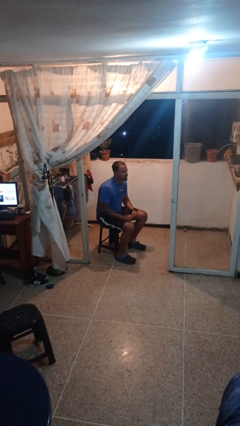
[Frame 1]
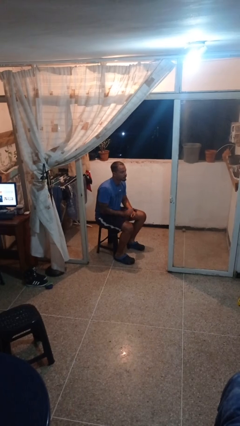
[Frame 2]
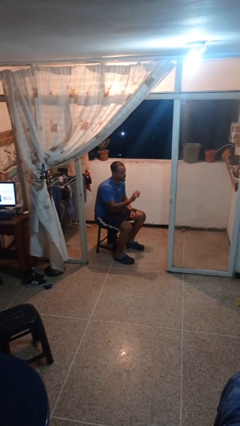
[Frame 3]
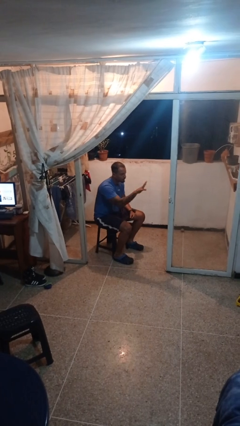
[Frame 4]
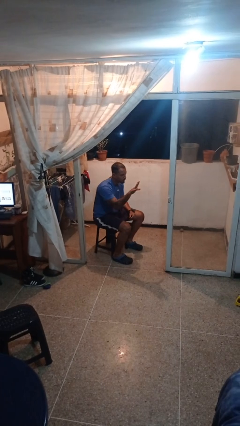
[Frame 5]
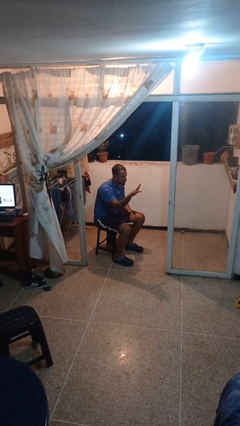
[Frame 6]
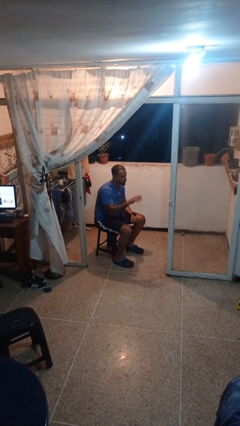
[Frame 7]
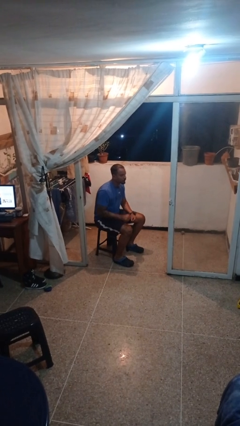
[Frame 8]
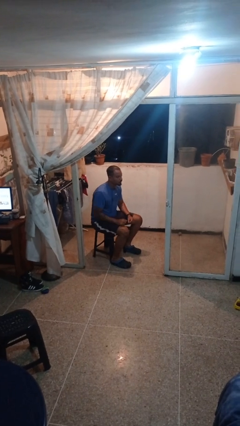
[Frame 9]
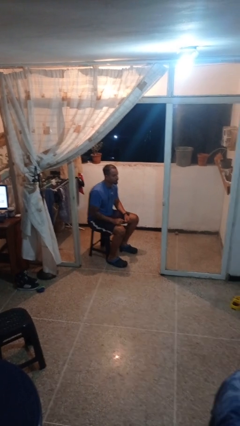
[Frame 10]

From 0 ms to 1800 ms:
person gestures zoom in

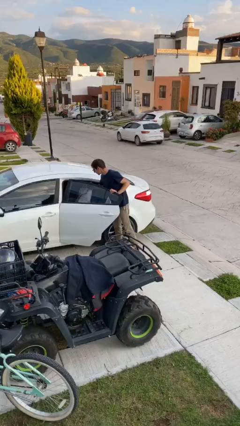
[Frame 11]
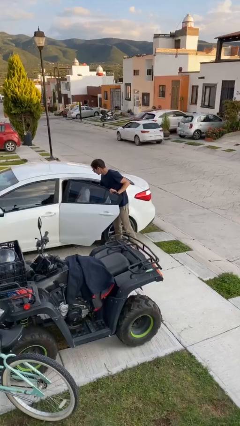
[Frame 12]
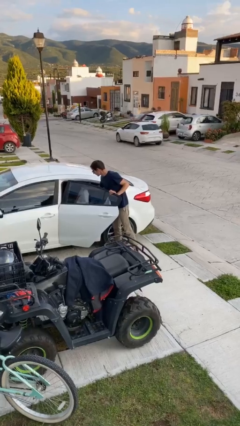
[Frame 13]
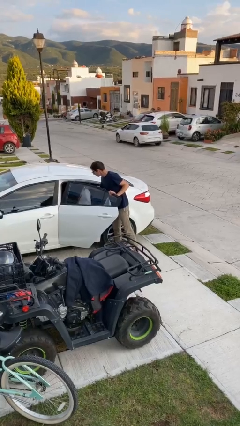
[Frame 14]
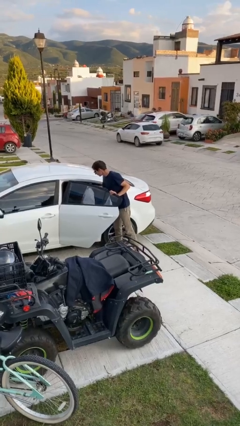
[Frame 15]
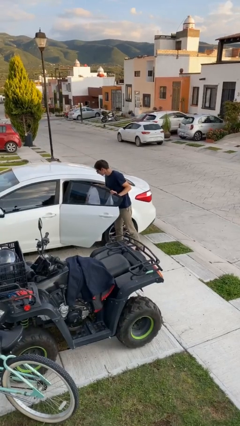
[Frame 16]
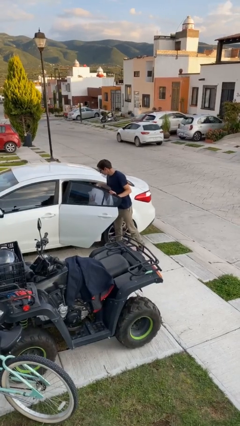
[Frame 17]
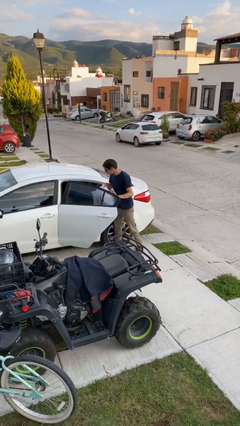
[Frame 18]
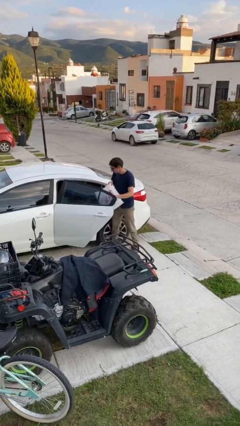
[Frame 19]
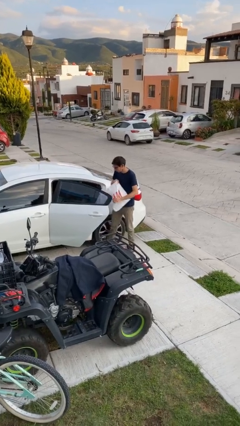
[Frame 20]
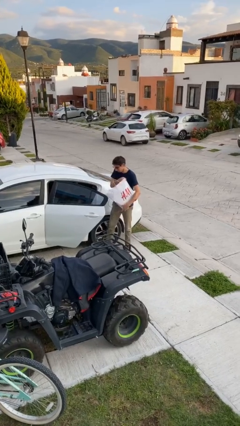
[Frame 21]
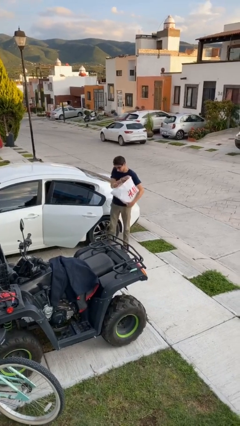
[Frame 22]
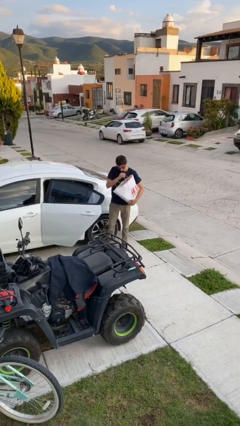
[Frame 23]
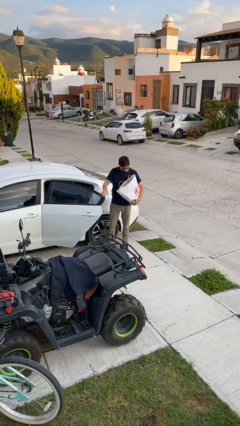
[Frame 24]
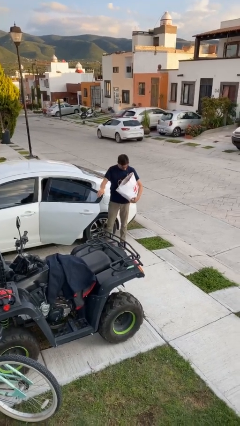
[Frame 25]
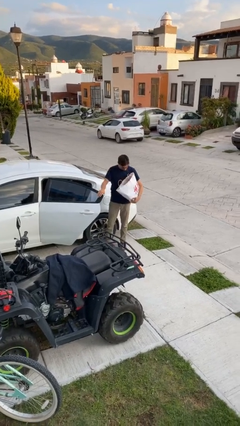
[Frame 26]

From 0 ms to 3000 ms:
person unloads car

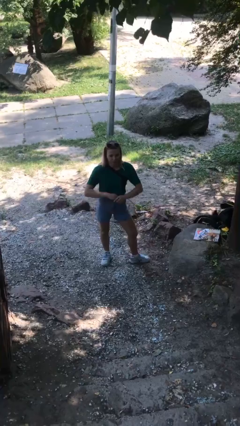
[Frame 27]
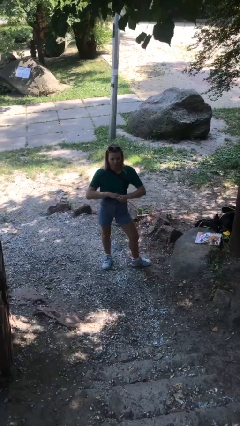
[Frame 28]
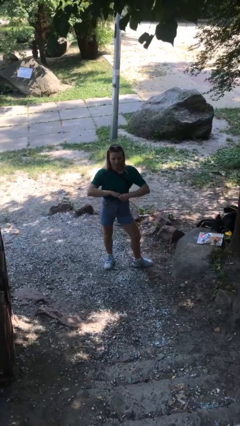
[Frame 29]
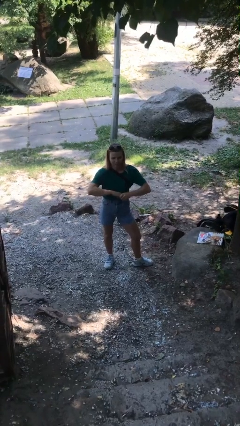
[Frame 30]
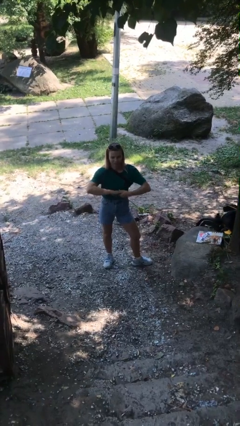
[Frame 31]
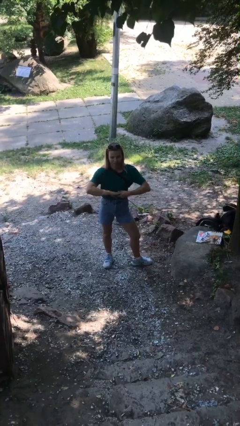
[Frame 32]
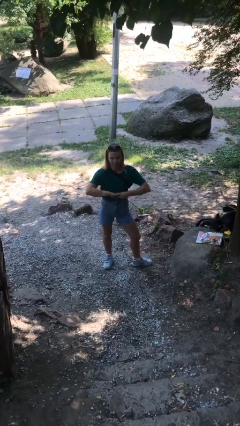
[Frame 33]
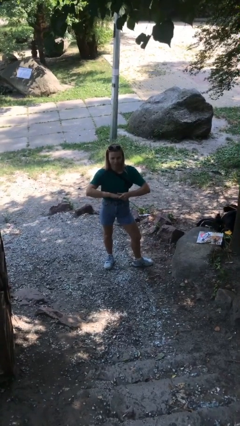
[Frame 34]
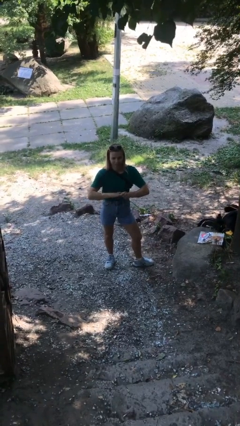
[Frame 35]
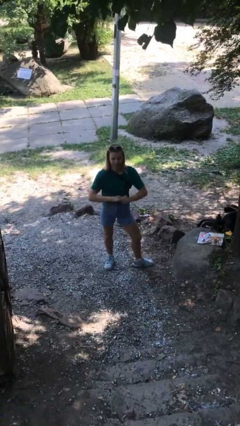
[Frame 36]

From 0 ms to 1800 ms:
person cracks knuckles

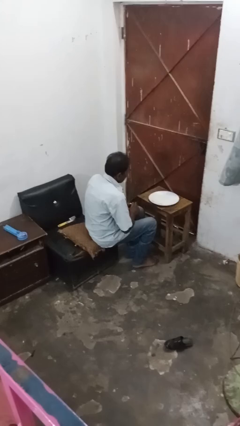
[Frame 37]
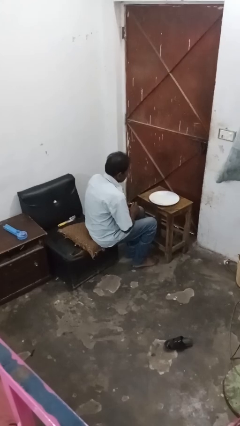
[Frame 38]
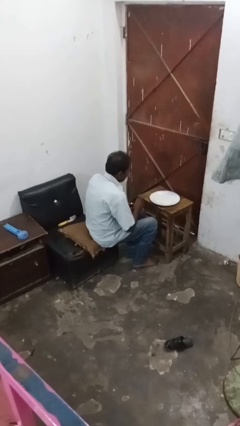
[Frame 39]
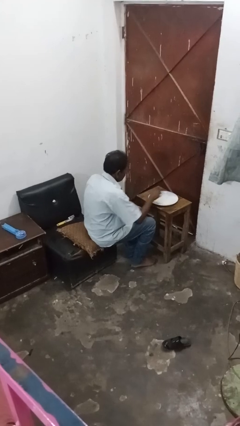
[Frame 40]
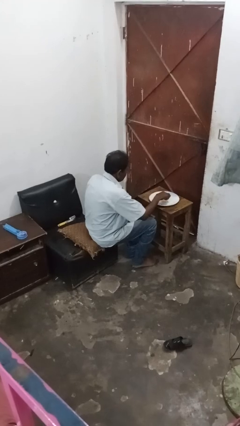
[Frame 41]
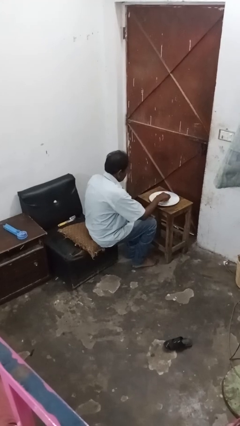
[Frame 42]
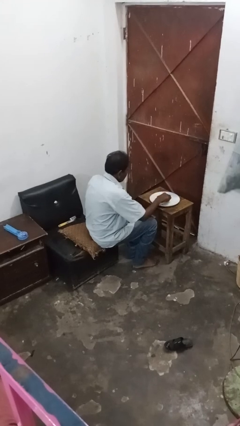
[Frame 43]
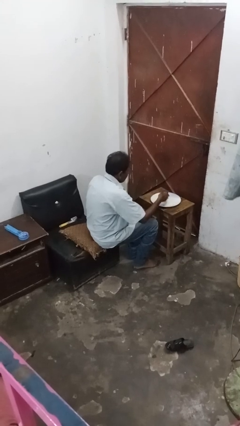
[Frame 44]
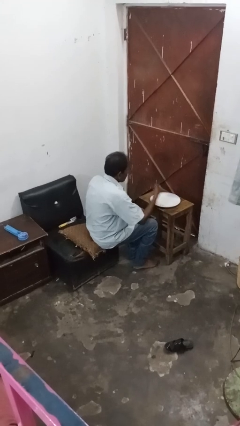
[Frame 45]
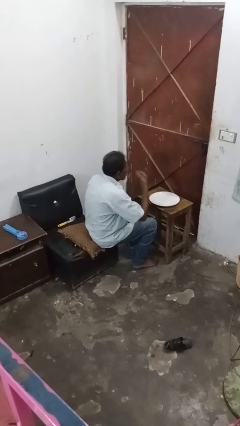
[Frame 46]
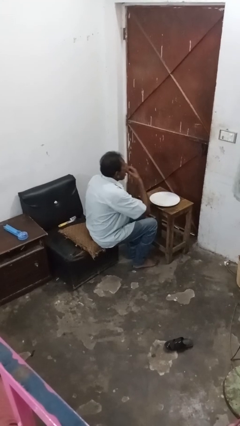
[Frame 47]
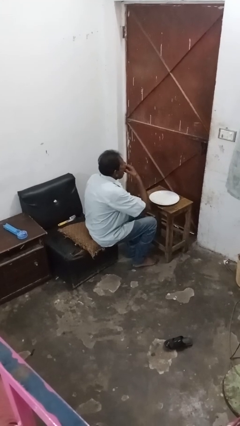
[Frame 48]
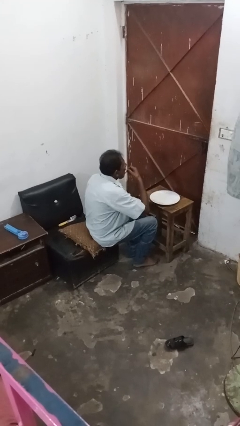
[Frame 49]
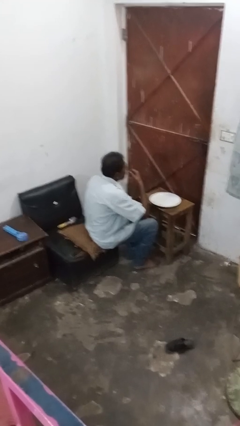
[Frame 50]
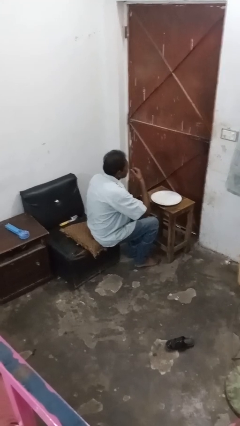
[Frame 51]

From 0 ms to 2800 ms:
person eats with hands

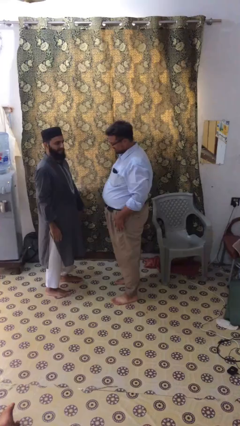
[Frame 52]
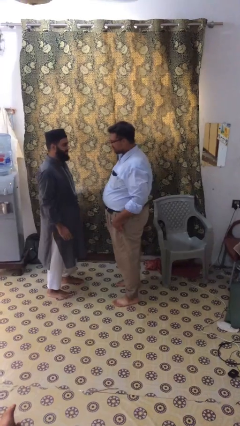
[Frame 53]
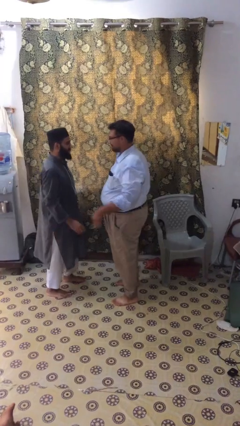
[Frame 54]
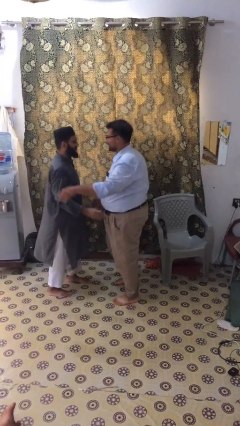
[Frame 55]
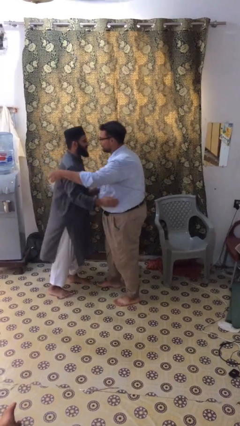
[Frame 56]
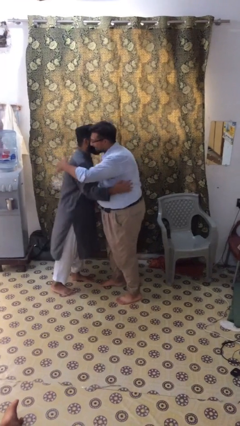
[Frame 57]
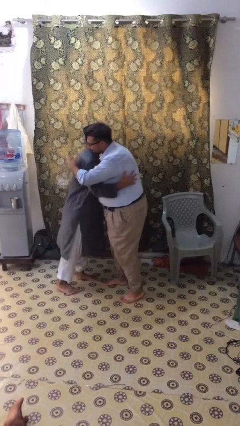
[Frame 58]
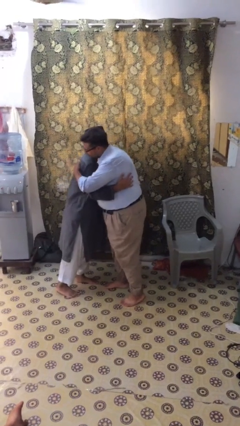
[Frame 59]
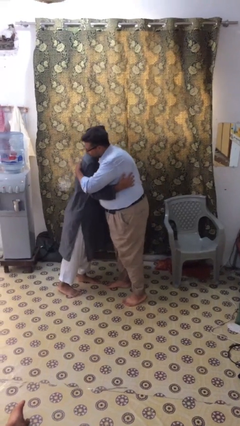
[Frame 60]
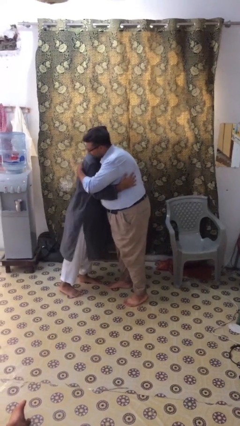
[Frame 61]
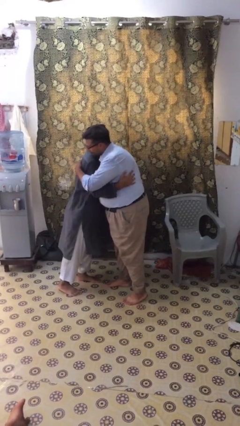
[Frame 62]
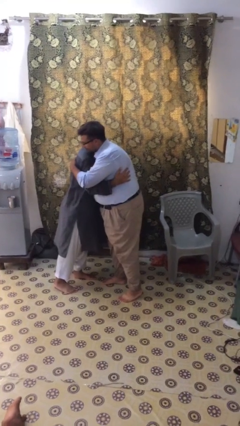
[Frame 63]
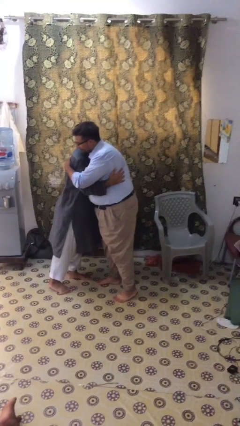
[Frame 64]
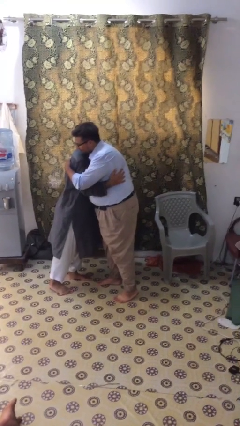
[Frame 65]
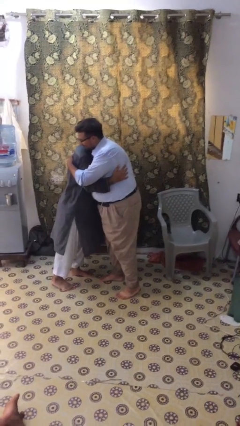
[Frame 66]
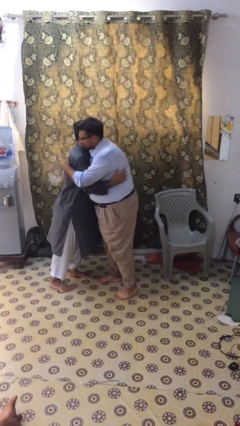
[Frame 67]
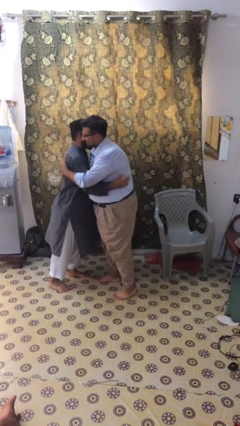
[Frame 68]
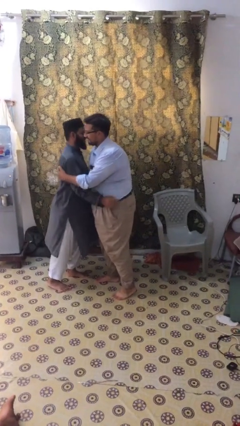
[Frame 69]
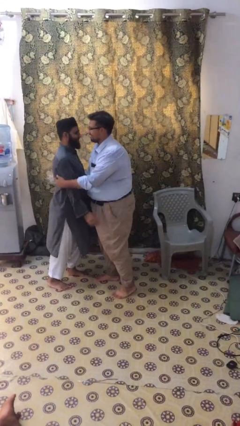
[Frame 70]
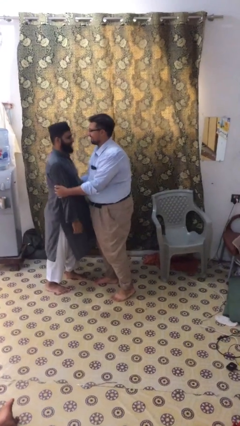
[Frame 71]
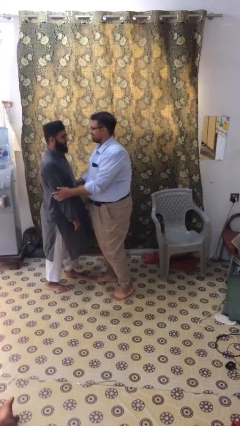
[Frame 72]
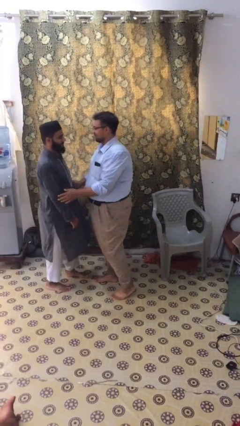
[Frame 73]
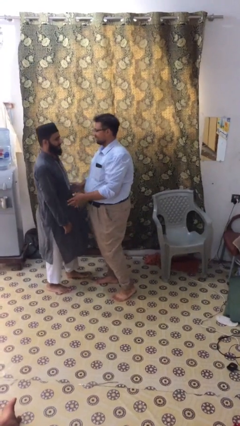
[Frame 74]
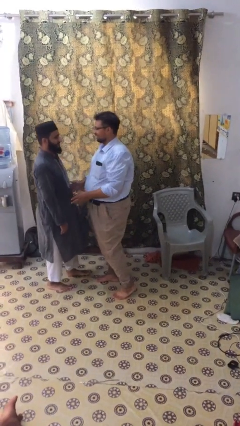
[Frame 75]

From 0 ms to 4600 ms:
person embraces person

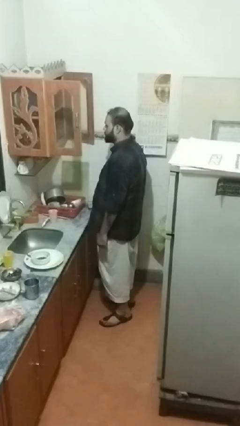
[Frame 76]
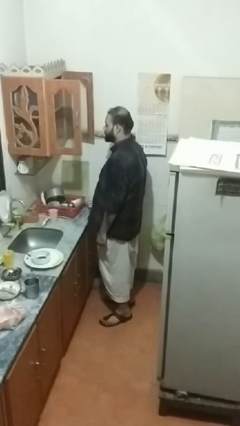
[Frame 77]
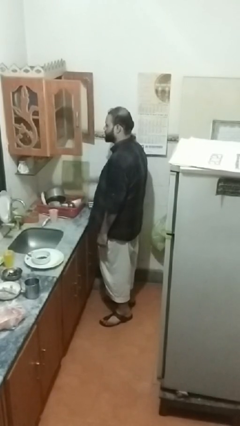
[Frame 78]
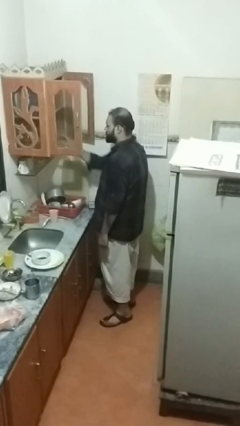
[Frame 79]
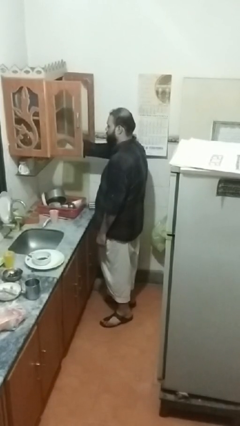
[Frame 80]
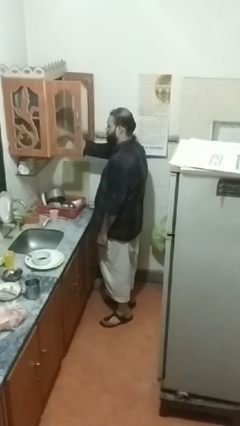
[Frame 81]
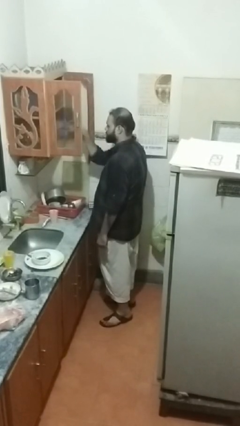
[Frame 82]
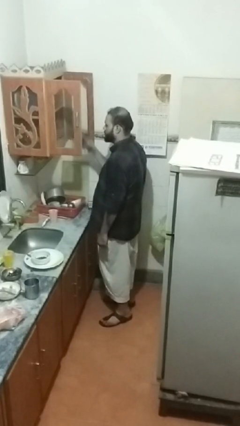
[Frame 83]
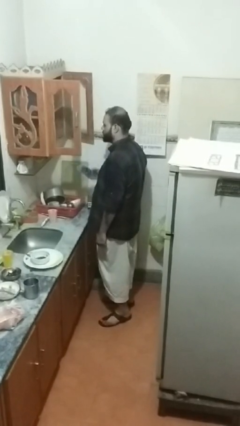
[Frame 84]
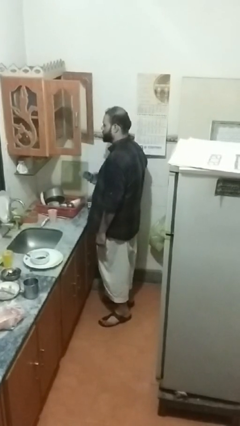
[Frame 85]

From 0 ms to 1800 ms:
person takes object from cabinet

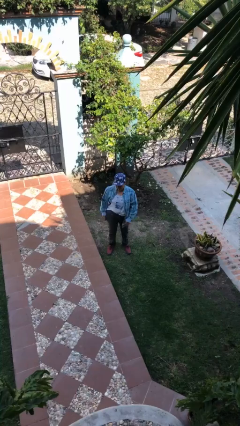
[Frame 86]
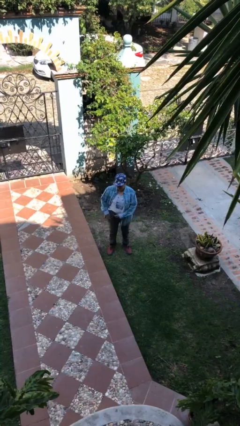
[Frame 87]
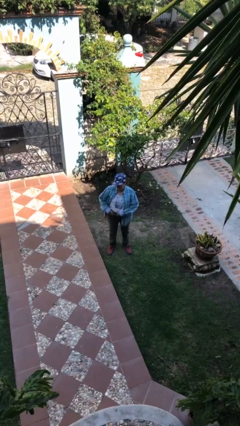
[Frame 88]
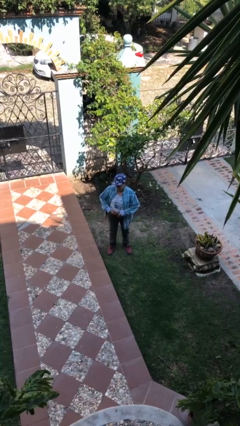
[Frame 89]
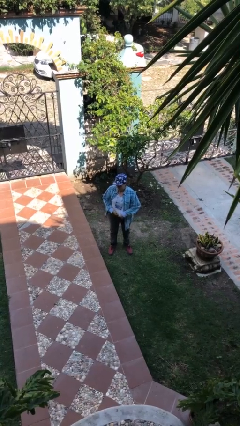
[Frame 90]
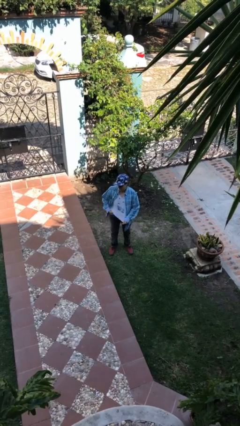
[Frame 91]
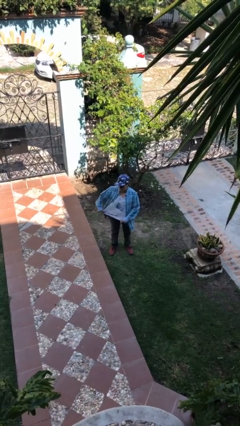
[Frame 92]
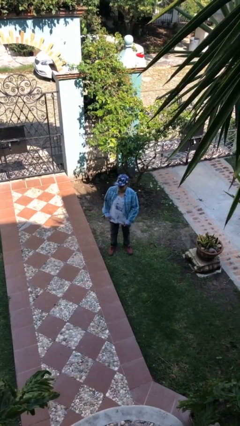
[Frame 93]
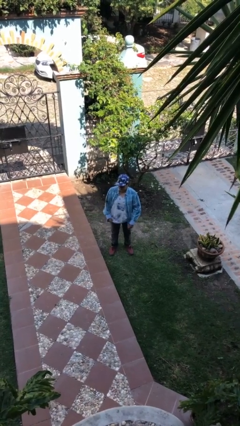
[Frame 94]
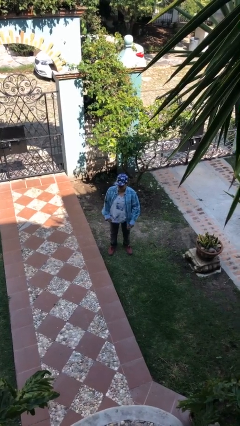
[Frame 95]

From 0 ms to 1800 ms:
person untucks shirt
